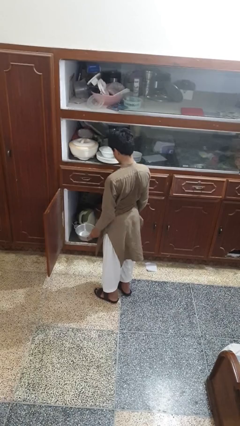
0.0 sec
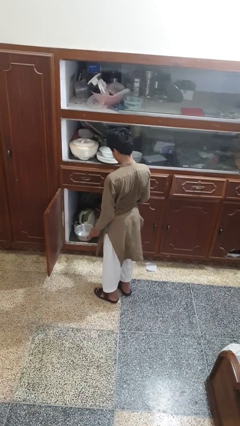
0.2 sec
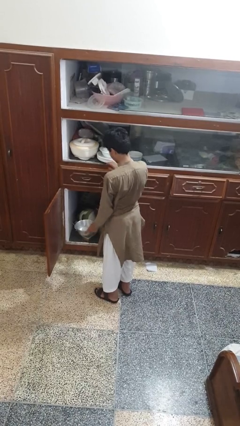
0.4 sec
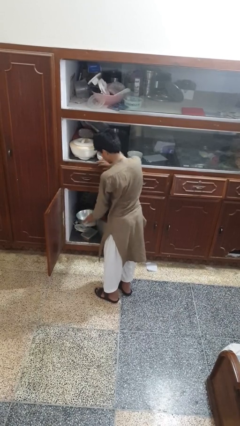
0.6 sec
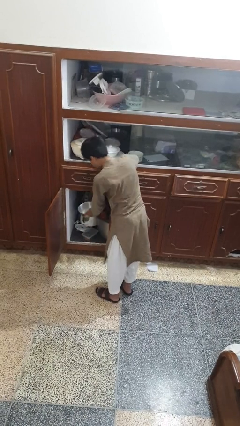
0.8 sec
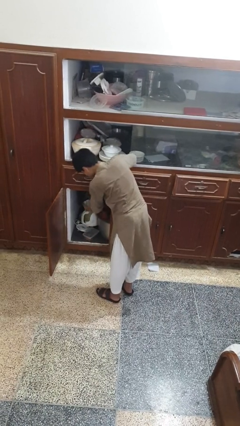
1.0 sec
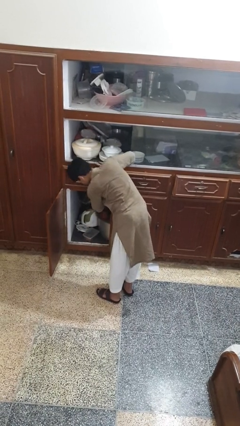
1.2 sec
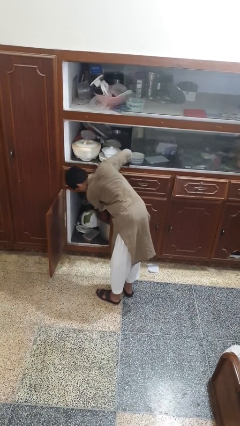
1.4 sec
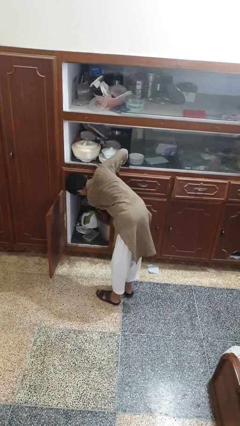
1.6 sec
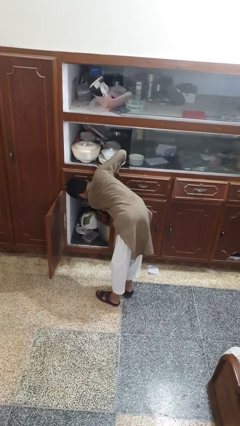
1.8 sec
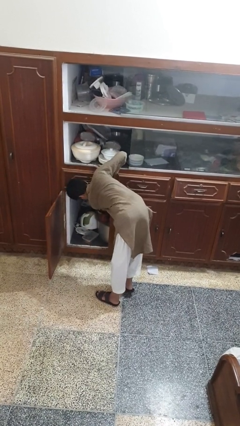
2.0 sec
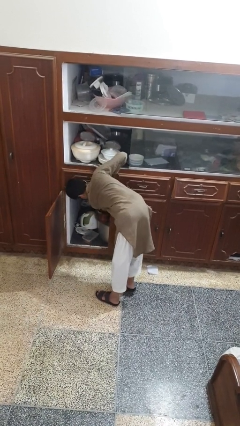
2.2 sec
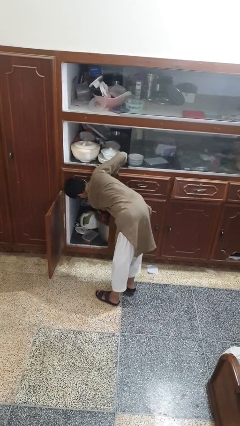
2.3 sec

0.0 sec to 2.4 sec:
person puts object in cabinet

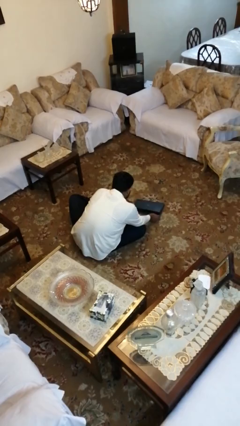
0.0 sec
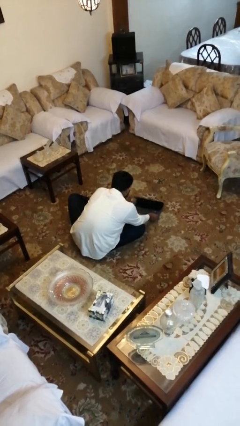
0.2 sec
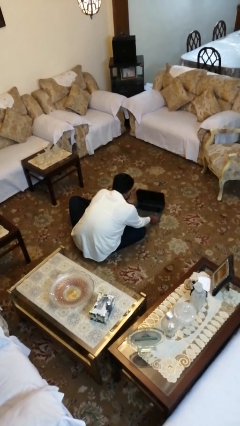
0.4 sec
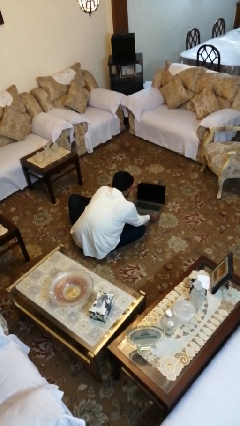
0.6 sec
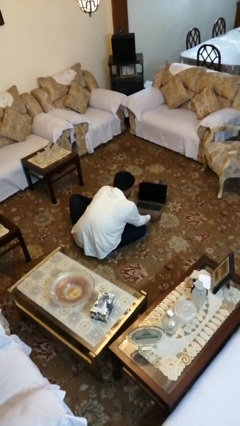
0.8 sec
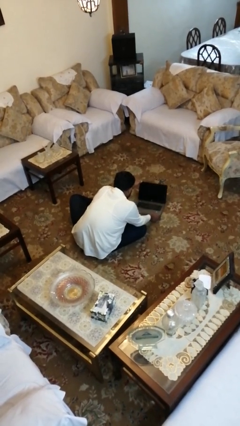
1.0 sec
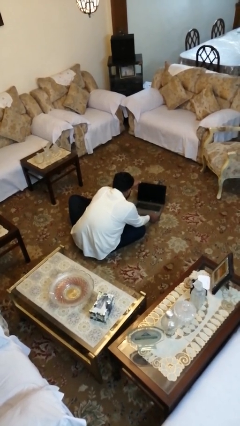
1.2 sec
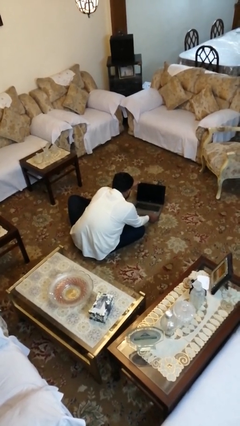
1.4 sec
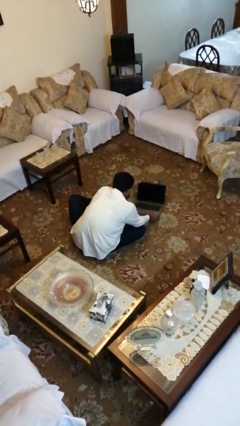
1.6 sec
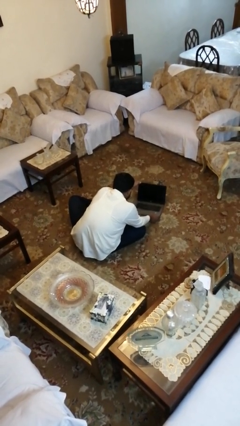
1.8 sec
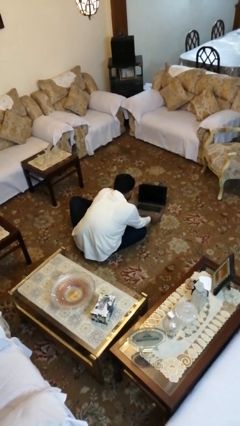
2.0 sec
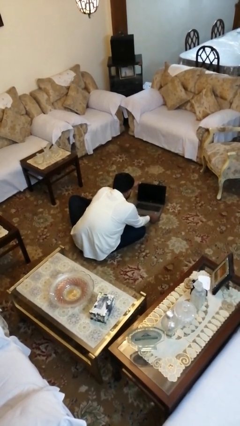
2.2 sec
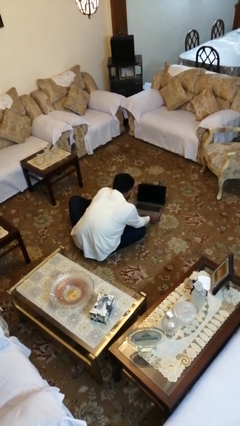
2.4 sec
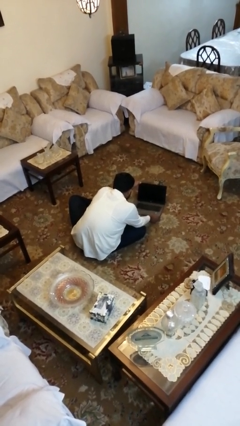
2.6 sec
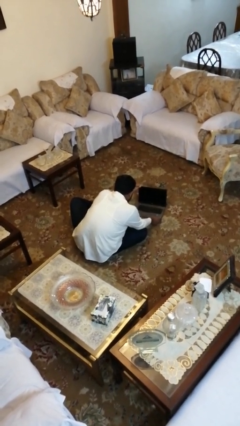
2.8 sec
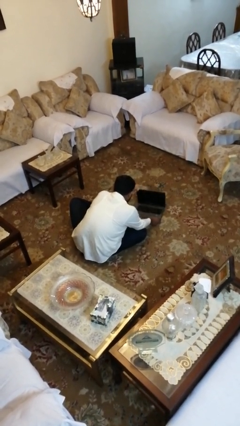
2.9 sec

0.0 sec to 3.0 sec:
person opens laptop

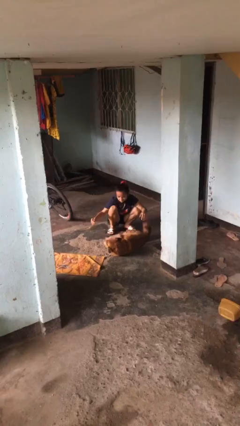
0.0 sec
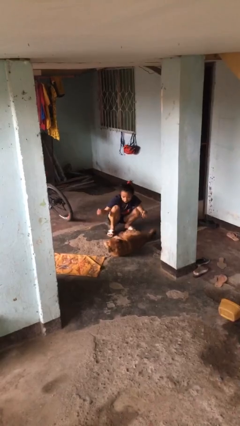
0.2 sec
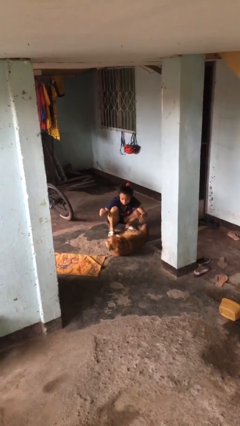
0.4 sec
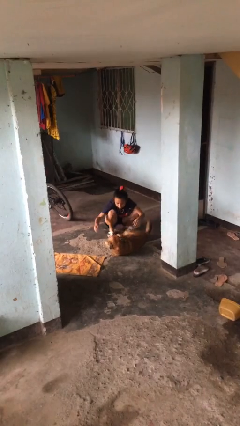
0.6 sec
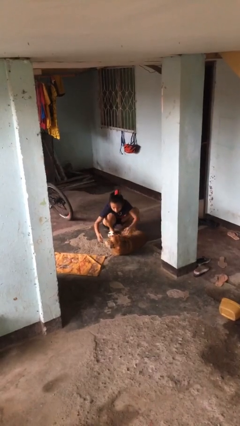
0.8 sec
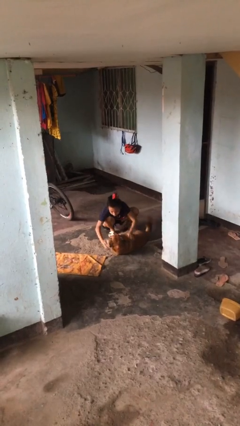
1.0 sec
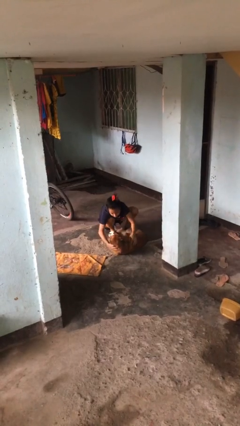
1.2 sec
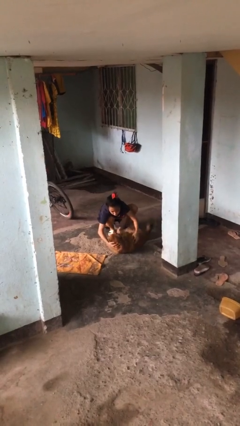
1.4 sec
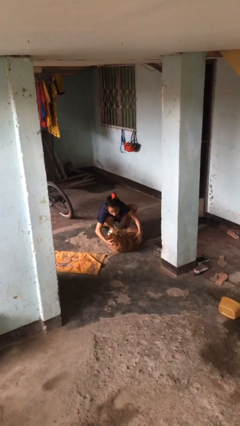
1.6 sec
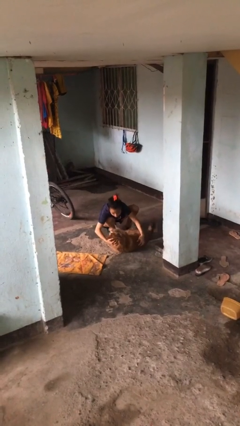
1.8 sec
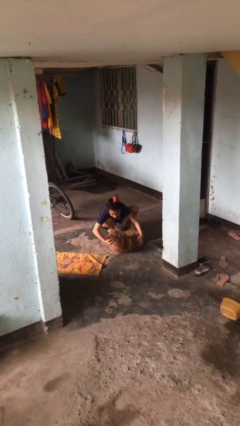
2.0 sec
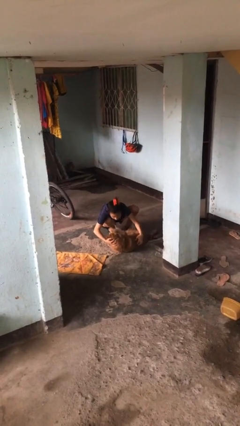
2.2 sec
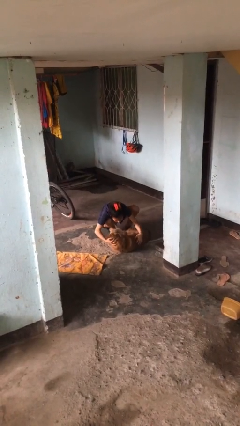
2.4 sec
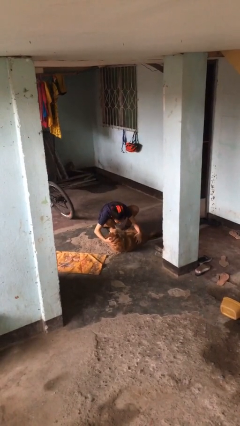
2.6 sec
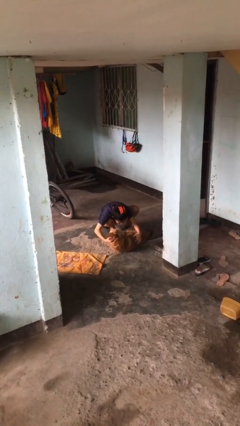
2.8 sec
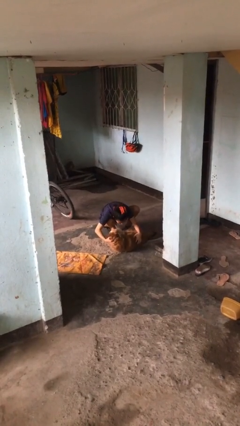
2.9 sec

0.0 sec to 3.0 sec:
person hugs dog

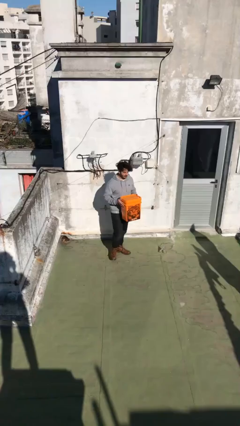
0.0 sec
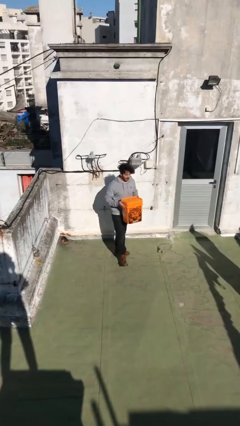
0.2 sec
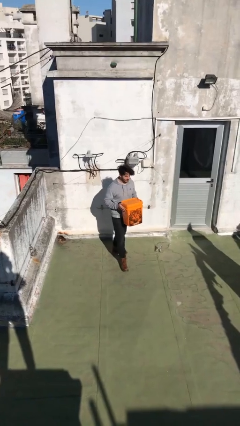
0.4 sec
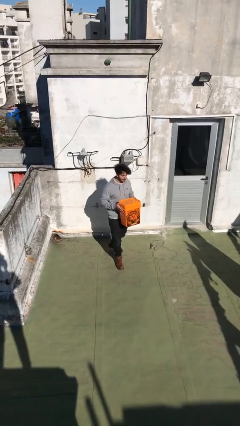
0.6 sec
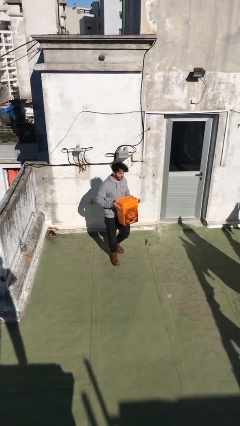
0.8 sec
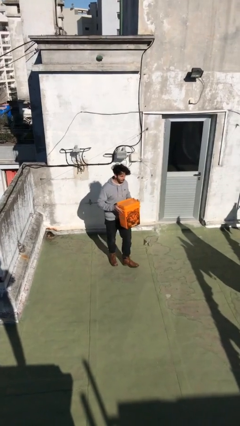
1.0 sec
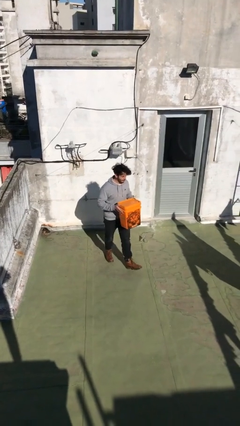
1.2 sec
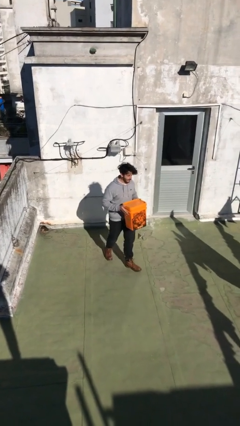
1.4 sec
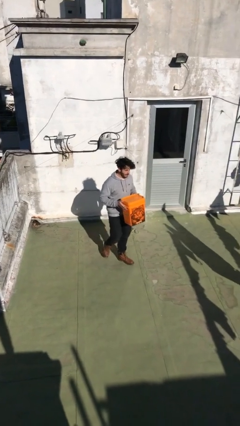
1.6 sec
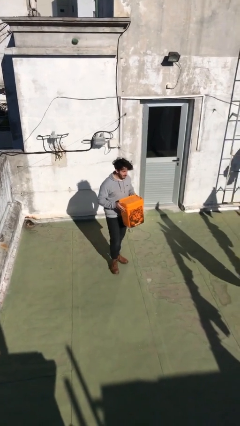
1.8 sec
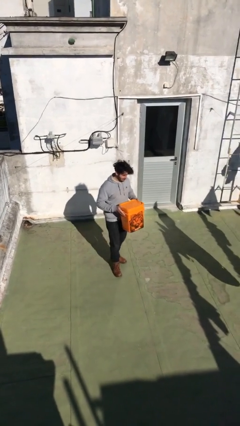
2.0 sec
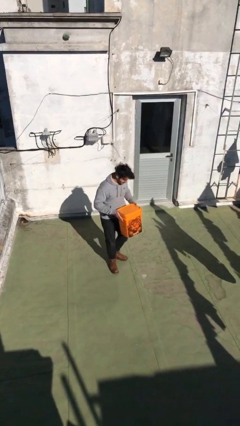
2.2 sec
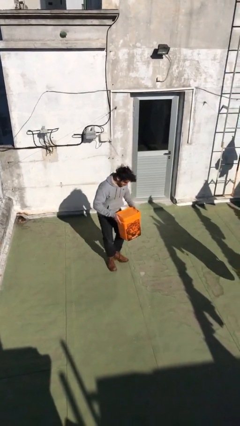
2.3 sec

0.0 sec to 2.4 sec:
person carries heavy object

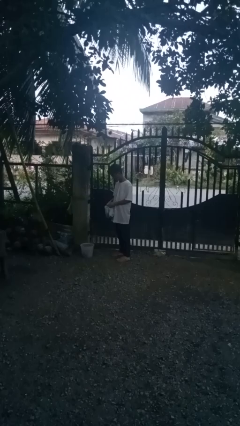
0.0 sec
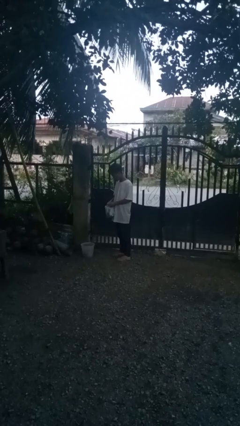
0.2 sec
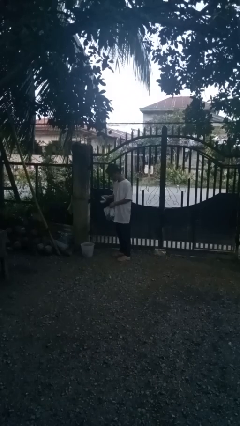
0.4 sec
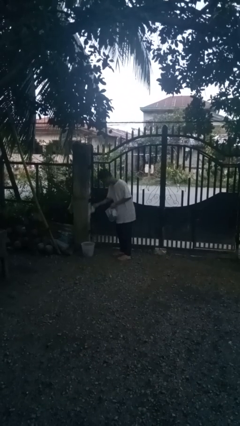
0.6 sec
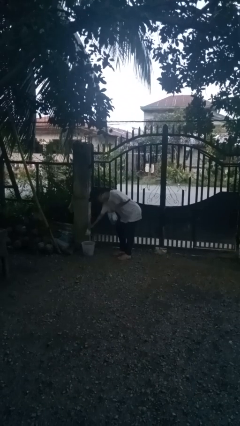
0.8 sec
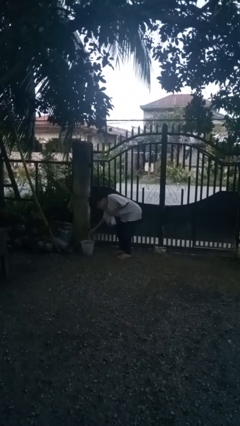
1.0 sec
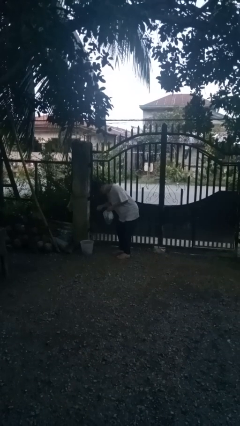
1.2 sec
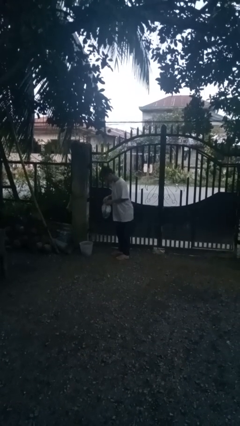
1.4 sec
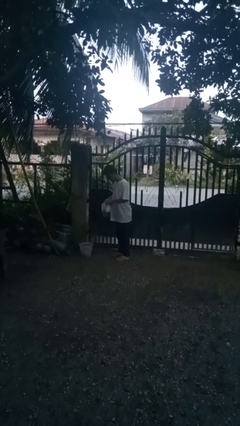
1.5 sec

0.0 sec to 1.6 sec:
person discards trash

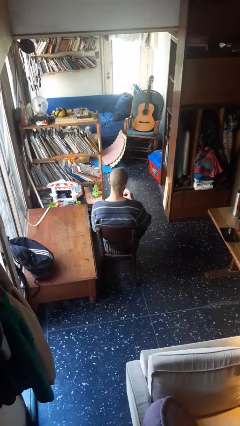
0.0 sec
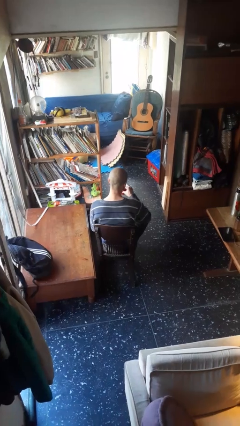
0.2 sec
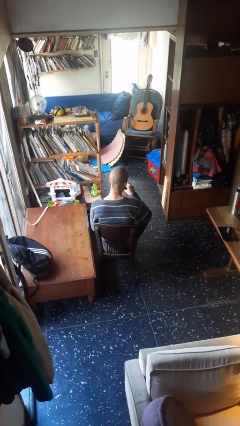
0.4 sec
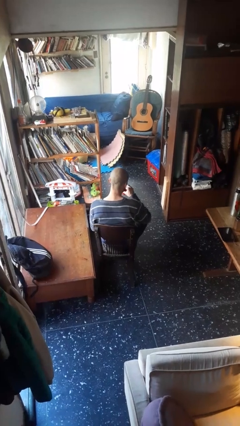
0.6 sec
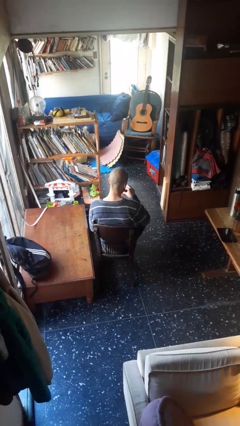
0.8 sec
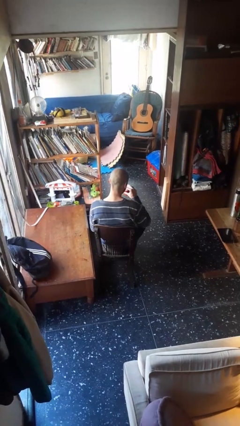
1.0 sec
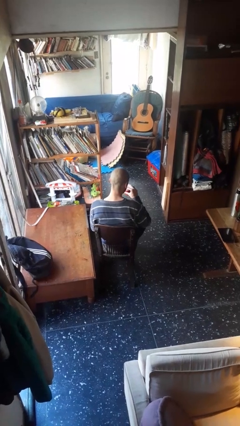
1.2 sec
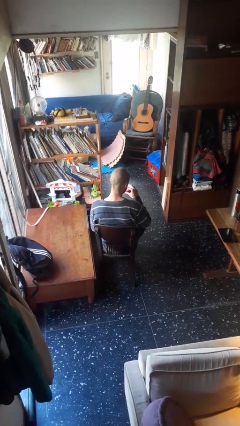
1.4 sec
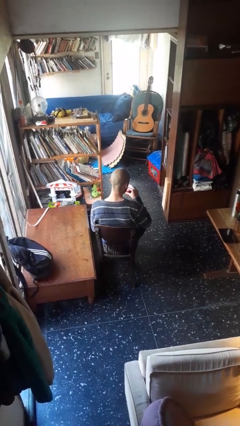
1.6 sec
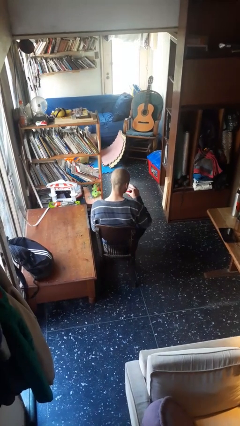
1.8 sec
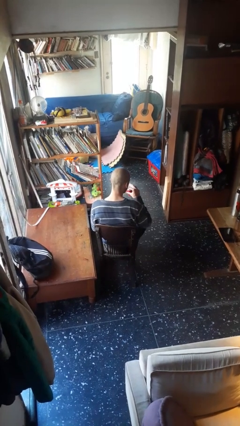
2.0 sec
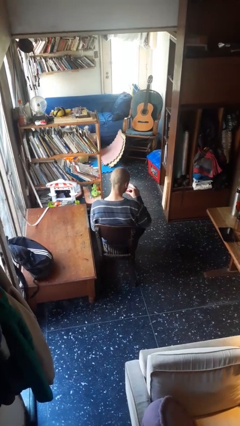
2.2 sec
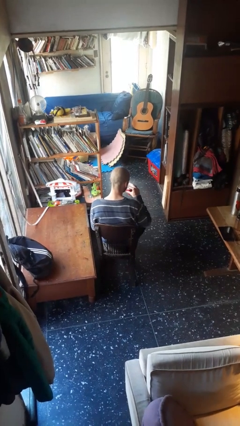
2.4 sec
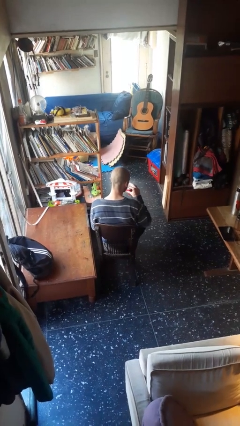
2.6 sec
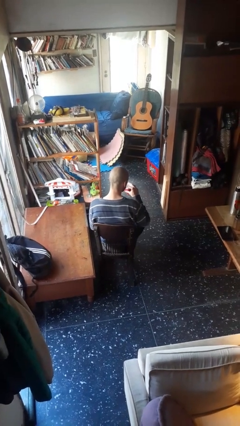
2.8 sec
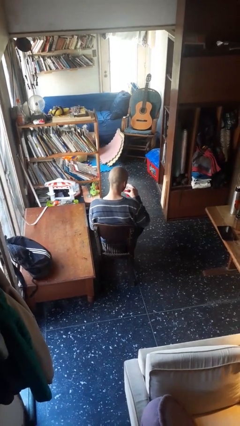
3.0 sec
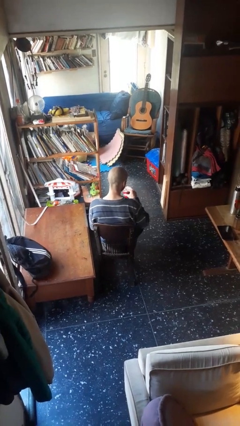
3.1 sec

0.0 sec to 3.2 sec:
person drinks from straw

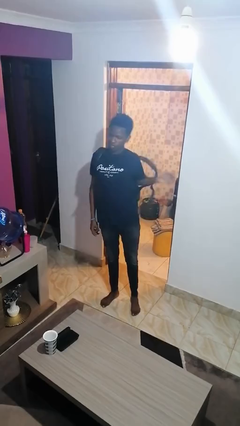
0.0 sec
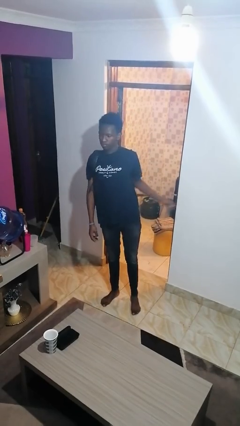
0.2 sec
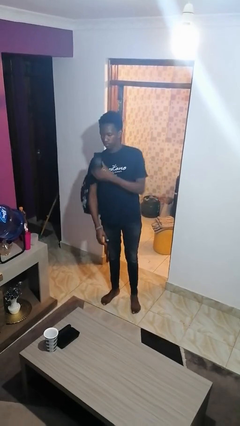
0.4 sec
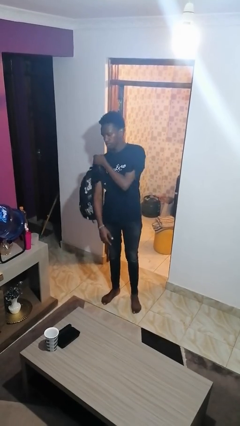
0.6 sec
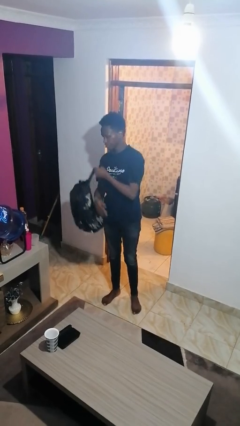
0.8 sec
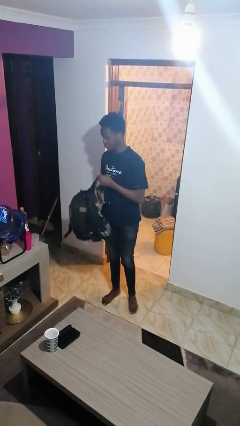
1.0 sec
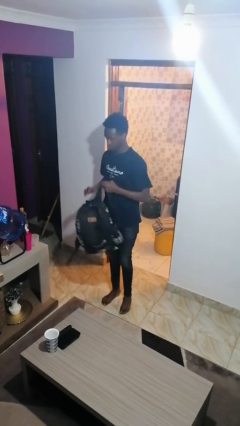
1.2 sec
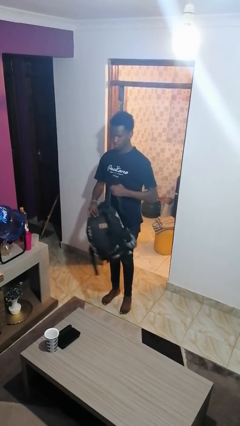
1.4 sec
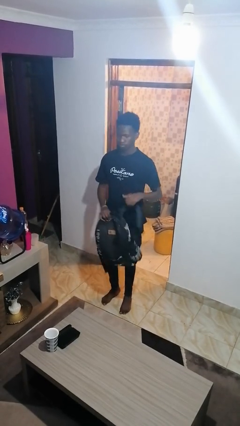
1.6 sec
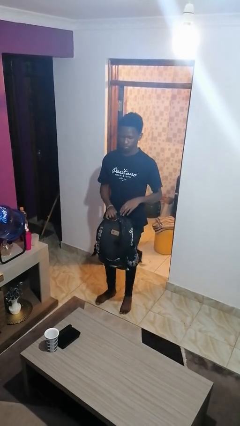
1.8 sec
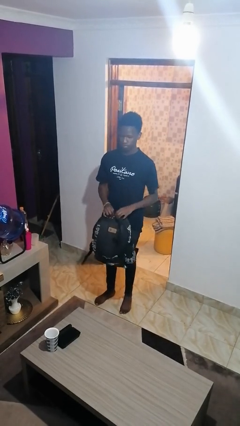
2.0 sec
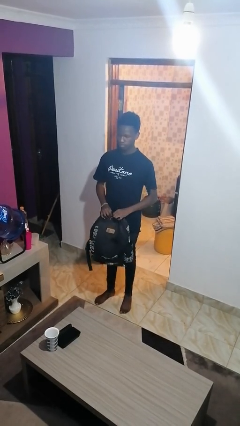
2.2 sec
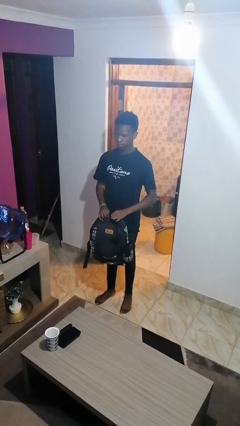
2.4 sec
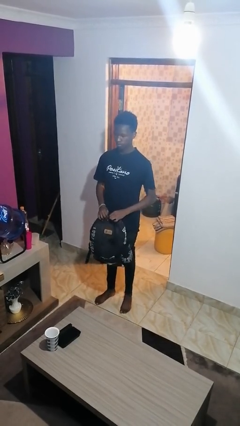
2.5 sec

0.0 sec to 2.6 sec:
person takes off backpack
